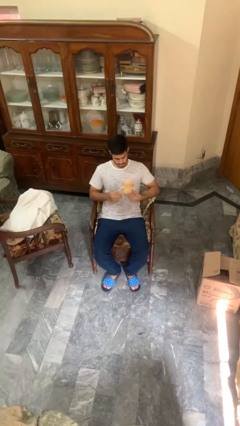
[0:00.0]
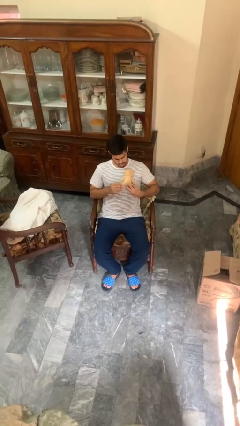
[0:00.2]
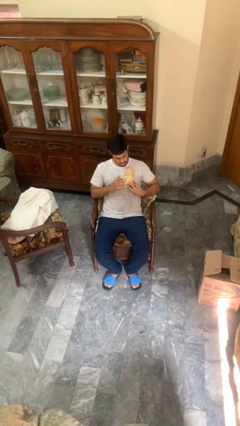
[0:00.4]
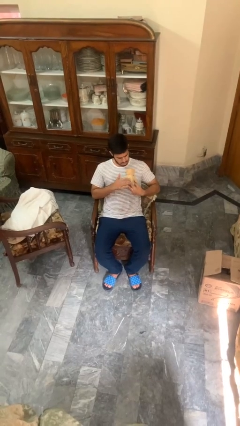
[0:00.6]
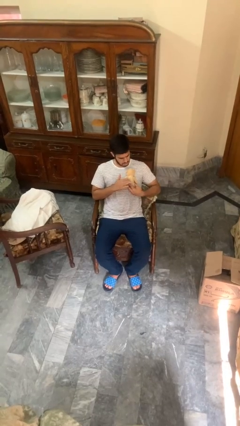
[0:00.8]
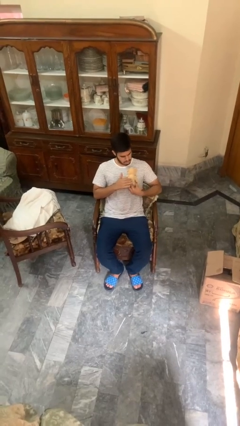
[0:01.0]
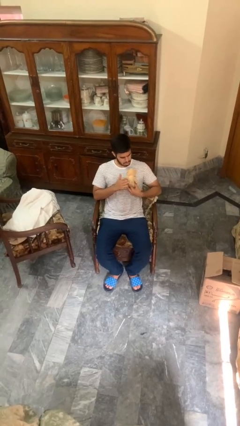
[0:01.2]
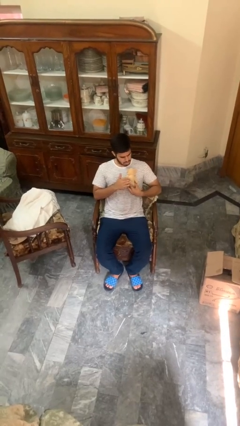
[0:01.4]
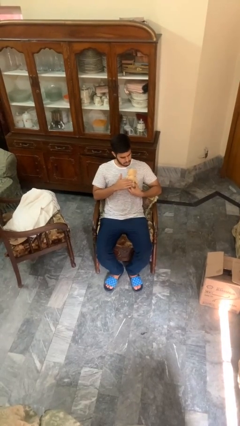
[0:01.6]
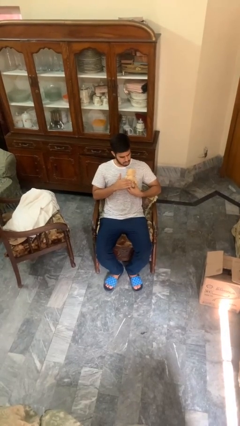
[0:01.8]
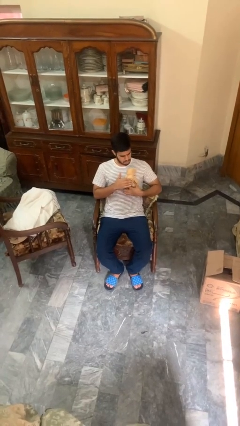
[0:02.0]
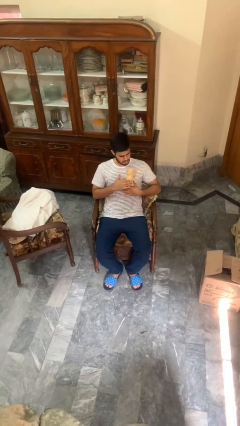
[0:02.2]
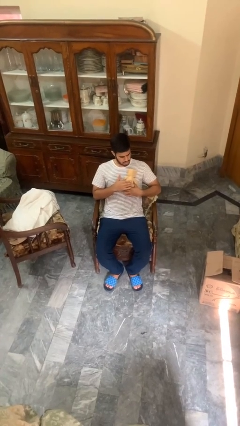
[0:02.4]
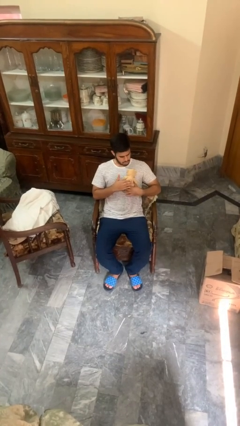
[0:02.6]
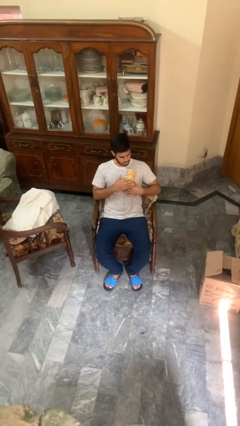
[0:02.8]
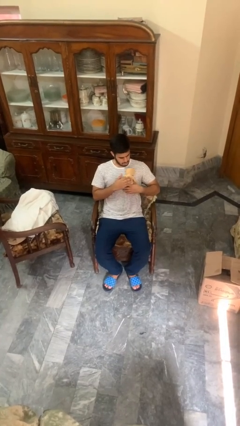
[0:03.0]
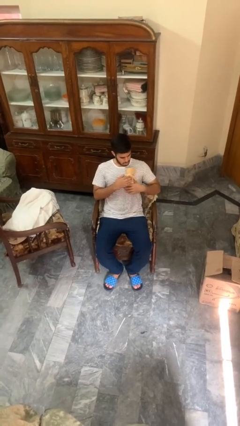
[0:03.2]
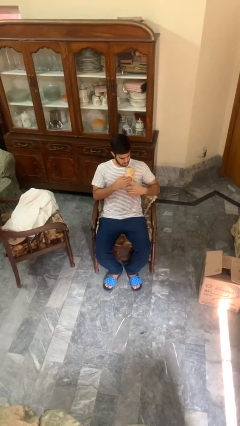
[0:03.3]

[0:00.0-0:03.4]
person hugs stuffed animal

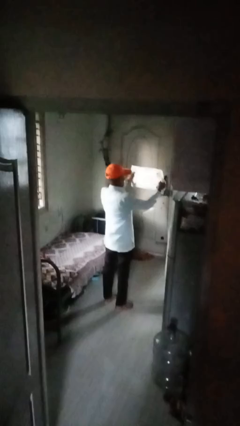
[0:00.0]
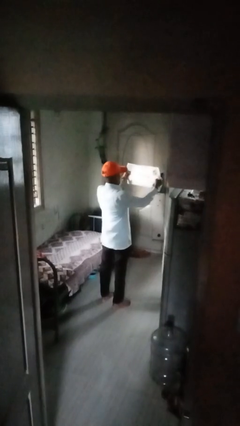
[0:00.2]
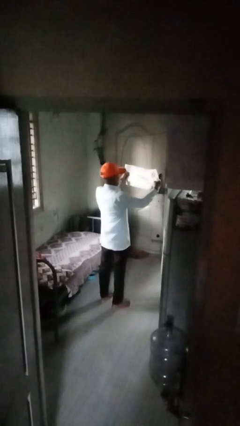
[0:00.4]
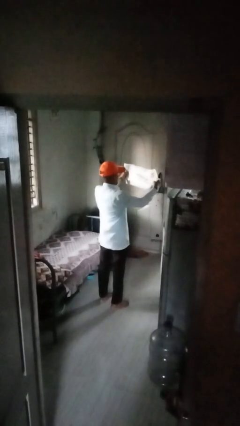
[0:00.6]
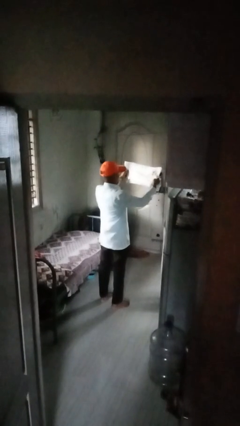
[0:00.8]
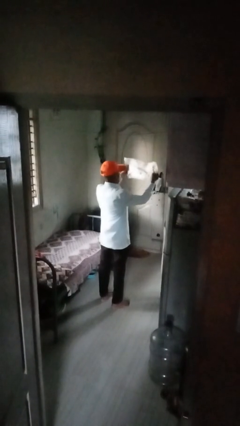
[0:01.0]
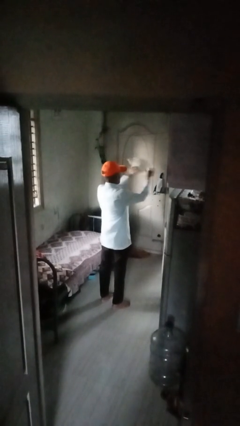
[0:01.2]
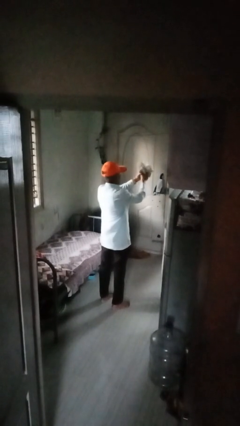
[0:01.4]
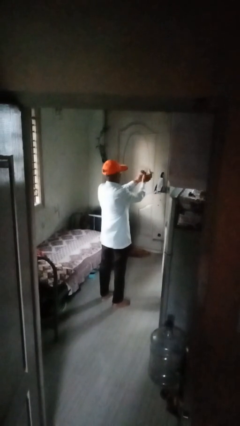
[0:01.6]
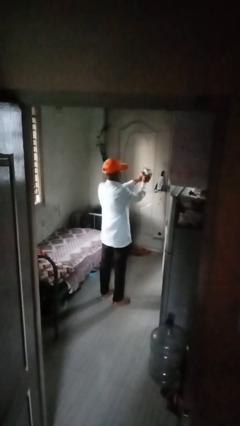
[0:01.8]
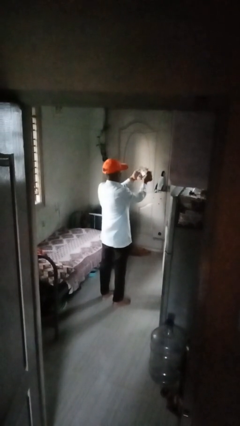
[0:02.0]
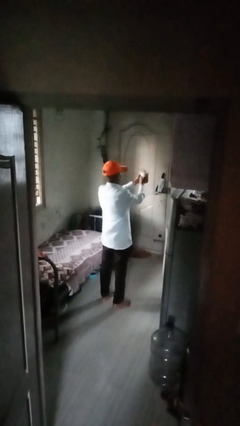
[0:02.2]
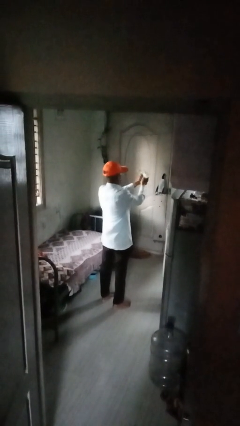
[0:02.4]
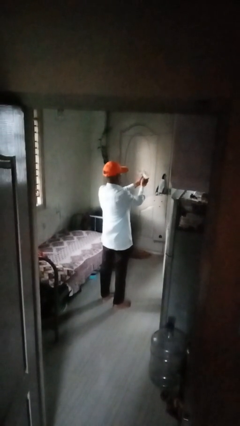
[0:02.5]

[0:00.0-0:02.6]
person crumples paper

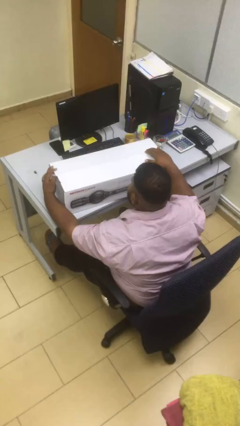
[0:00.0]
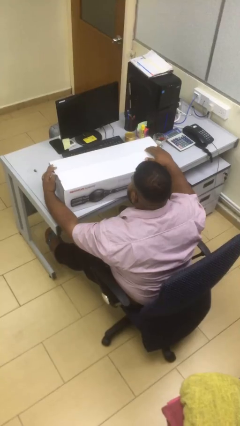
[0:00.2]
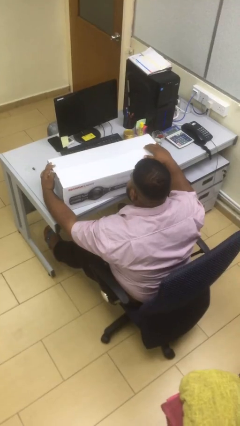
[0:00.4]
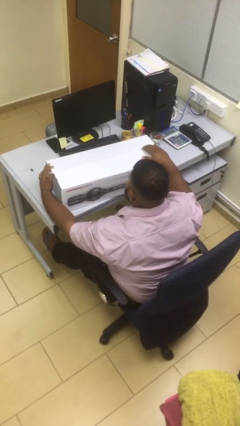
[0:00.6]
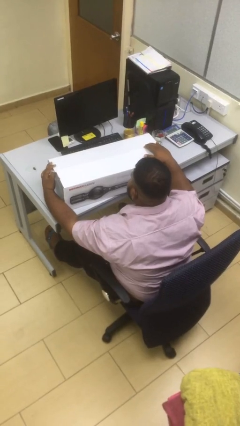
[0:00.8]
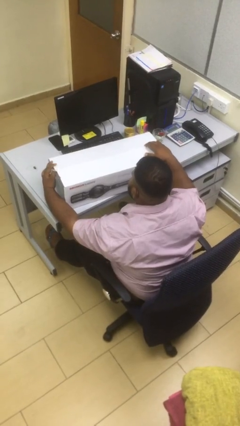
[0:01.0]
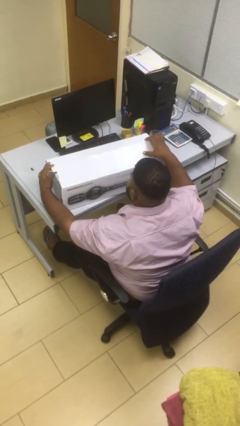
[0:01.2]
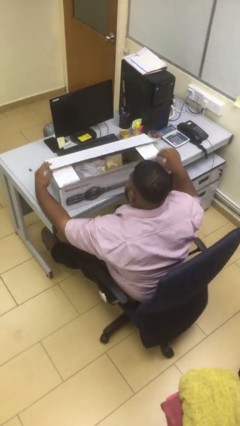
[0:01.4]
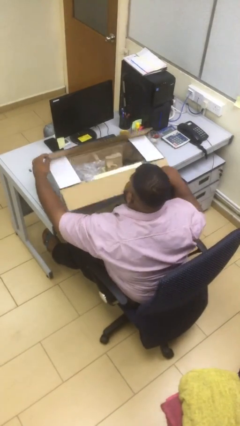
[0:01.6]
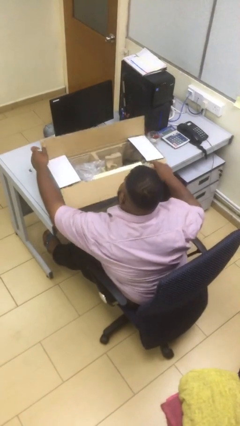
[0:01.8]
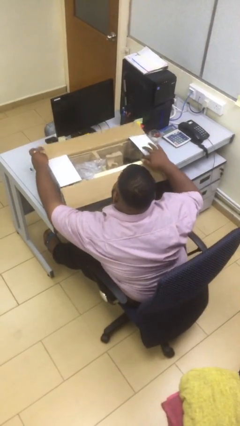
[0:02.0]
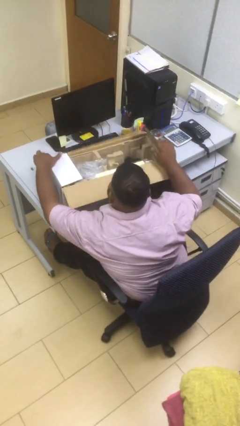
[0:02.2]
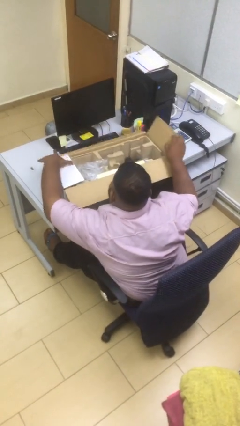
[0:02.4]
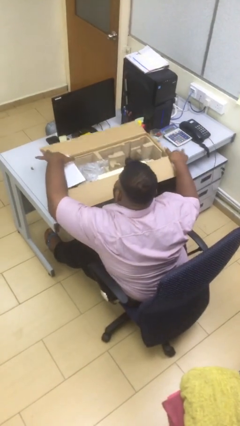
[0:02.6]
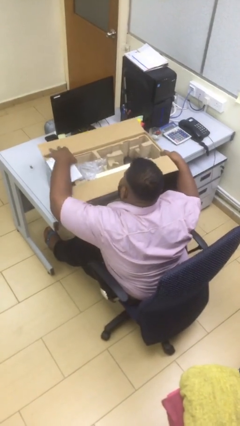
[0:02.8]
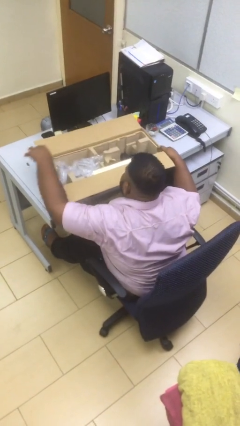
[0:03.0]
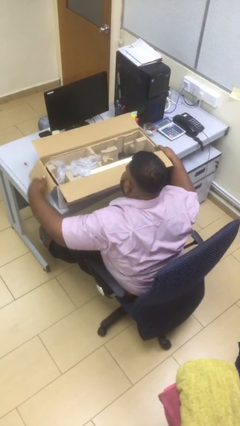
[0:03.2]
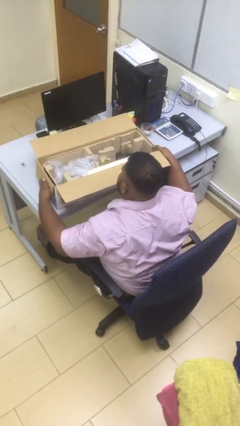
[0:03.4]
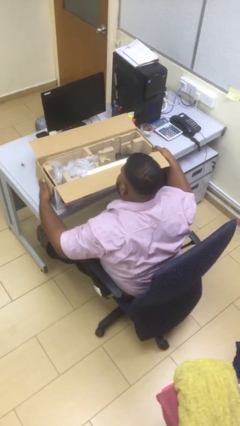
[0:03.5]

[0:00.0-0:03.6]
person opens box

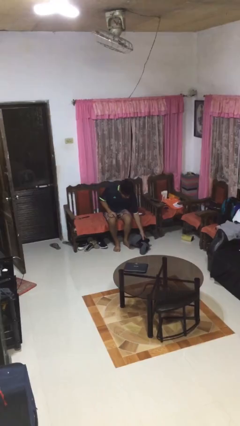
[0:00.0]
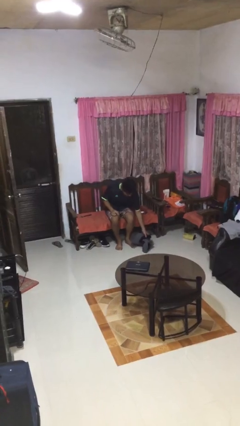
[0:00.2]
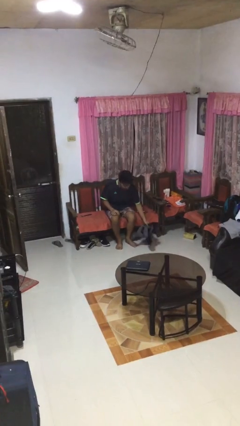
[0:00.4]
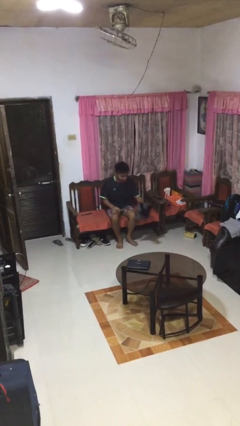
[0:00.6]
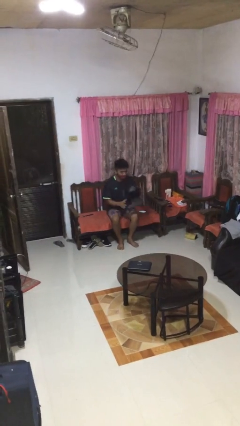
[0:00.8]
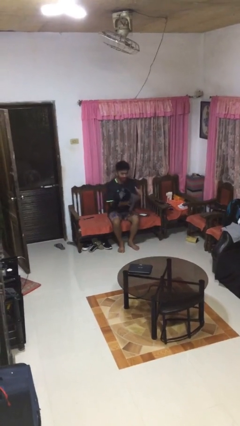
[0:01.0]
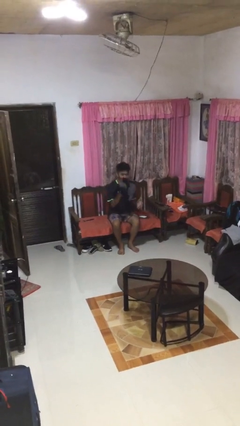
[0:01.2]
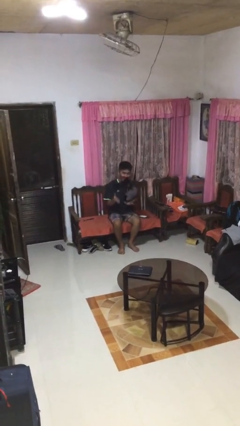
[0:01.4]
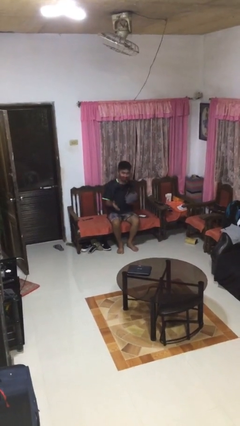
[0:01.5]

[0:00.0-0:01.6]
person picks up object from floor

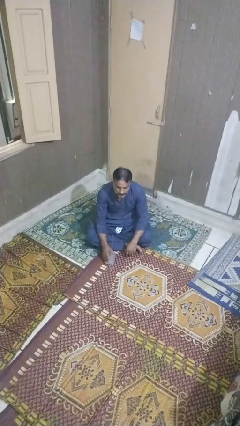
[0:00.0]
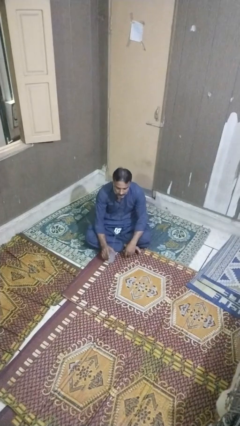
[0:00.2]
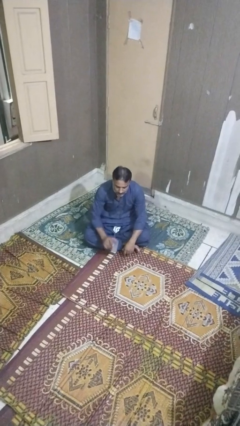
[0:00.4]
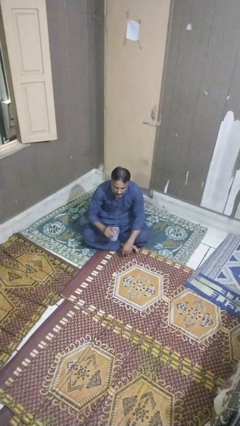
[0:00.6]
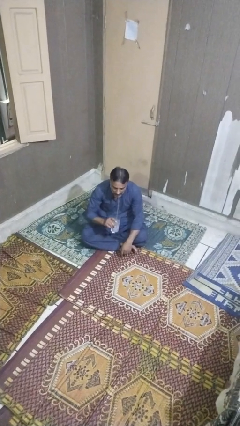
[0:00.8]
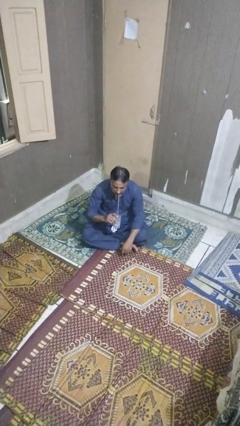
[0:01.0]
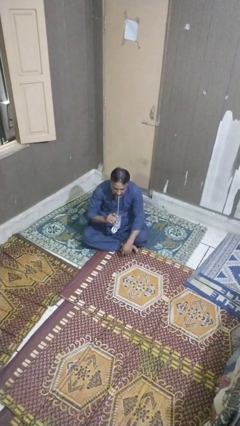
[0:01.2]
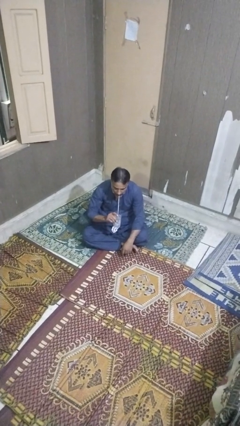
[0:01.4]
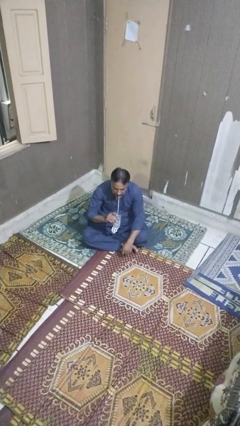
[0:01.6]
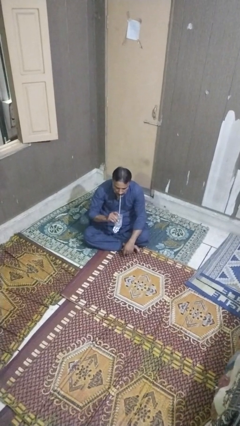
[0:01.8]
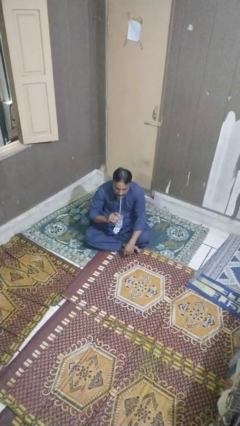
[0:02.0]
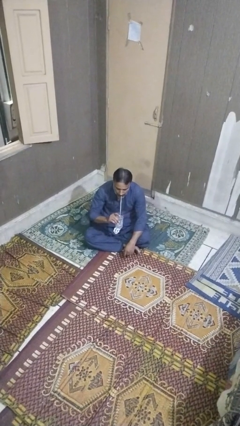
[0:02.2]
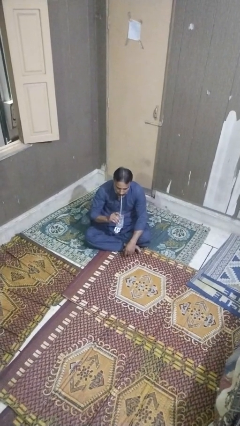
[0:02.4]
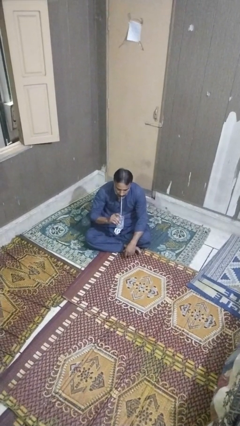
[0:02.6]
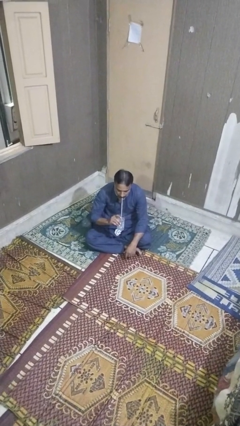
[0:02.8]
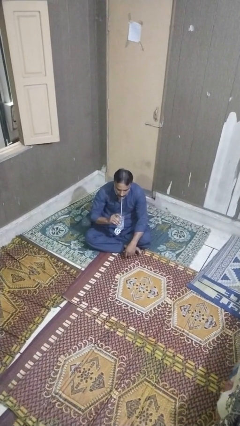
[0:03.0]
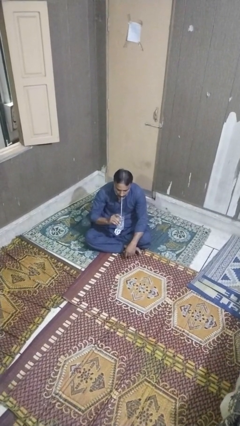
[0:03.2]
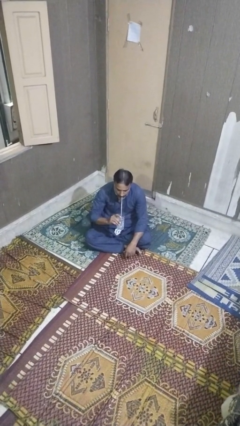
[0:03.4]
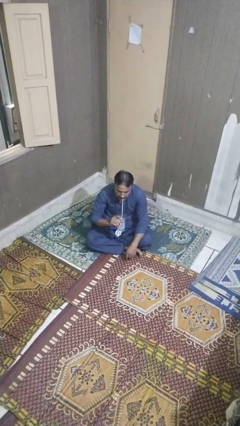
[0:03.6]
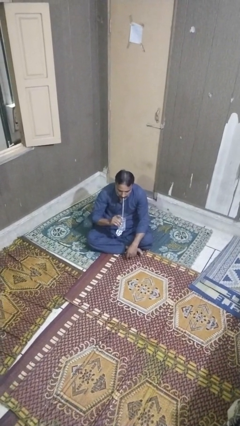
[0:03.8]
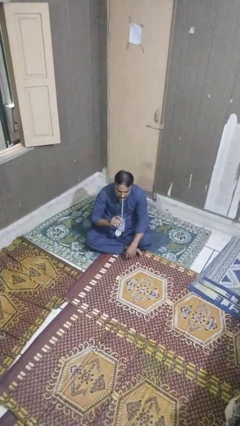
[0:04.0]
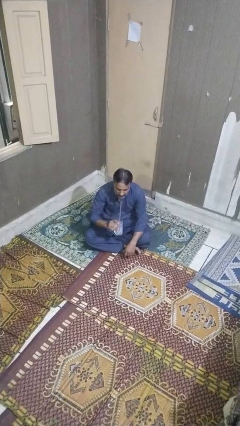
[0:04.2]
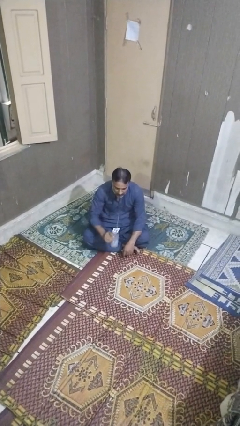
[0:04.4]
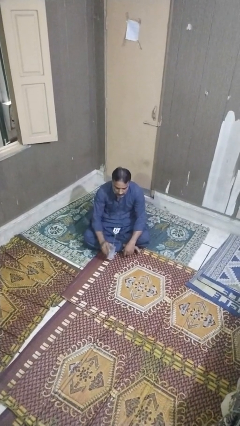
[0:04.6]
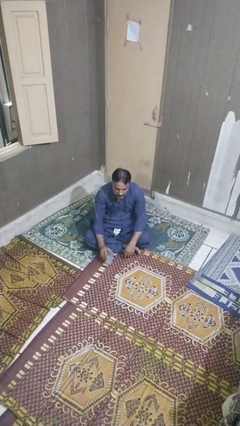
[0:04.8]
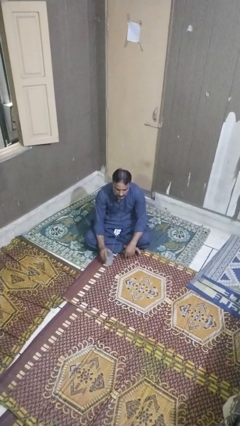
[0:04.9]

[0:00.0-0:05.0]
person drinks from straw

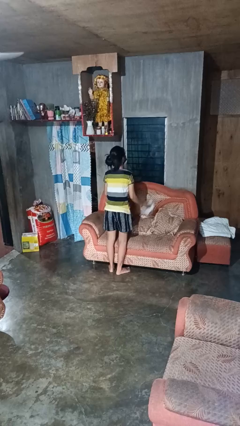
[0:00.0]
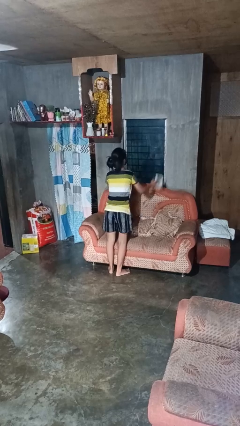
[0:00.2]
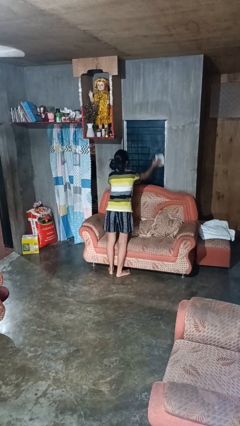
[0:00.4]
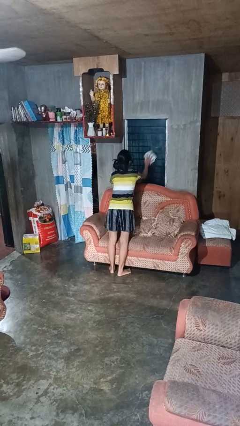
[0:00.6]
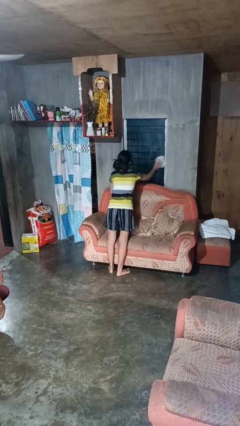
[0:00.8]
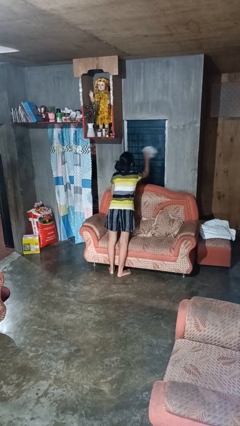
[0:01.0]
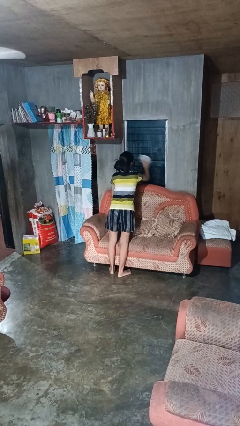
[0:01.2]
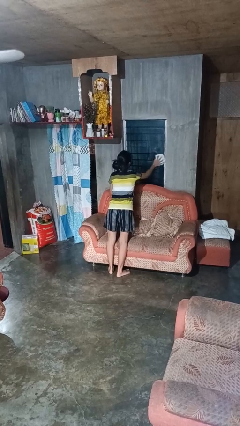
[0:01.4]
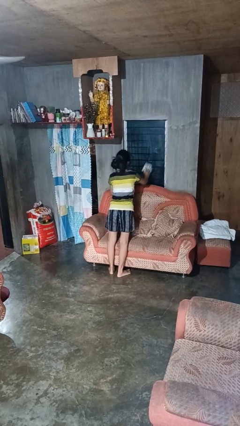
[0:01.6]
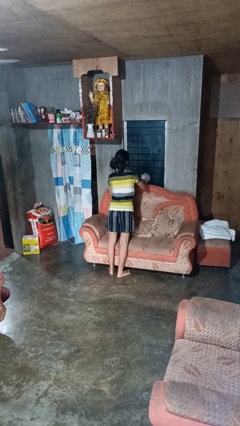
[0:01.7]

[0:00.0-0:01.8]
person washes window
